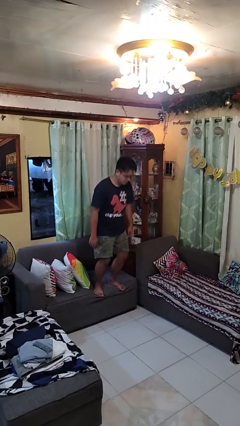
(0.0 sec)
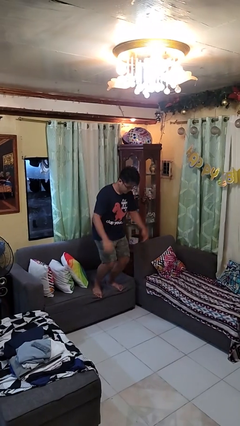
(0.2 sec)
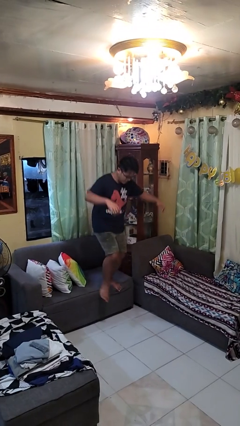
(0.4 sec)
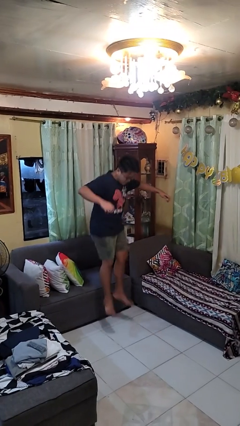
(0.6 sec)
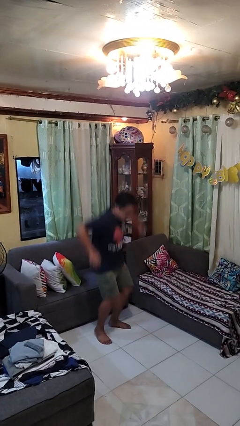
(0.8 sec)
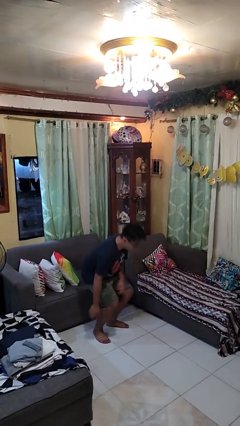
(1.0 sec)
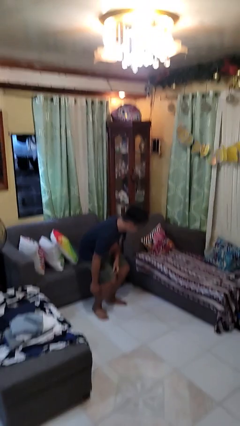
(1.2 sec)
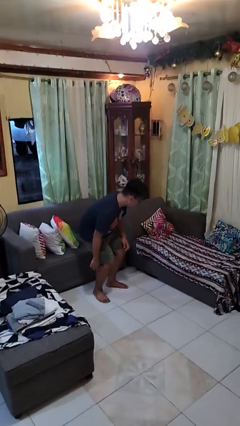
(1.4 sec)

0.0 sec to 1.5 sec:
person jumps on couch

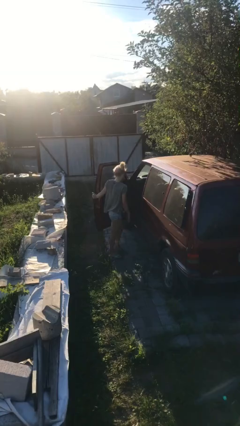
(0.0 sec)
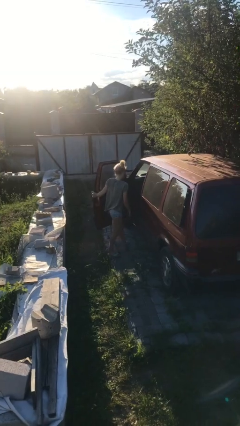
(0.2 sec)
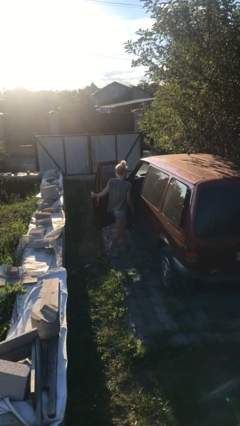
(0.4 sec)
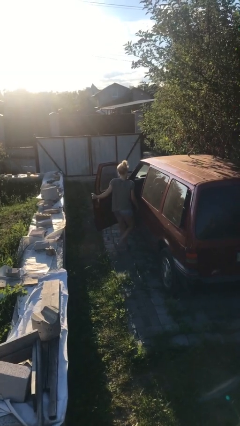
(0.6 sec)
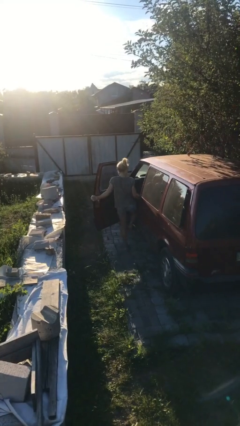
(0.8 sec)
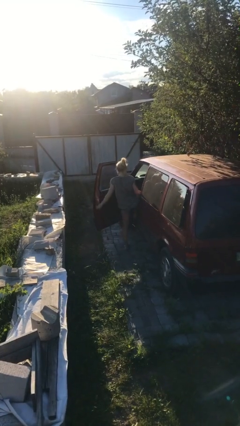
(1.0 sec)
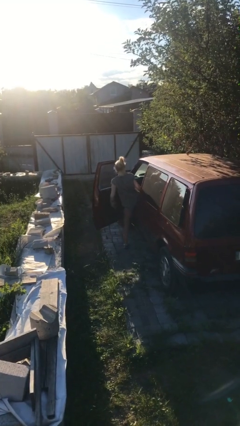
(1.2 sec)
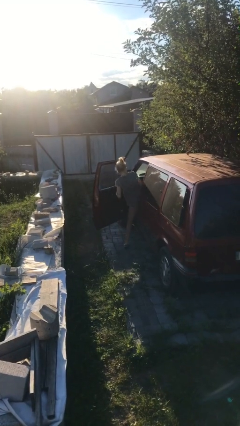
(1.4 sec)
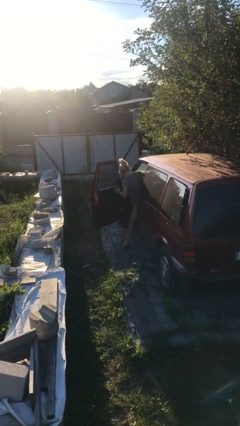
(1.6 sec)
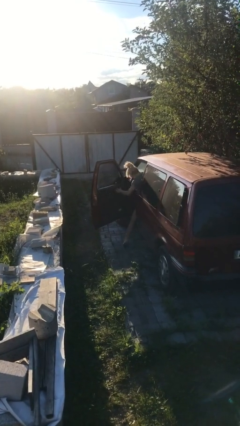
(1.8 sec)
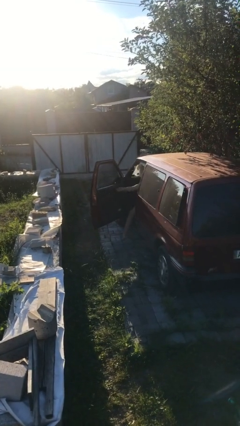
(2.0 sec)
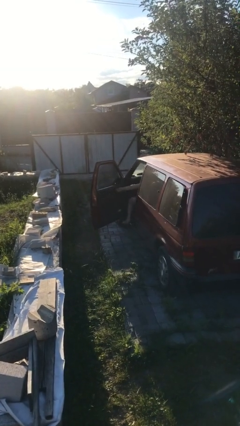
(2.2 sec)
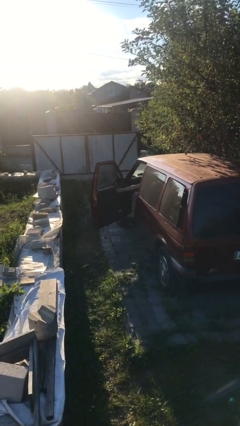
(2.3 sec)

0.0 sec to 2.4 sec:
person enters car

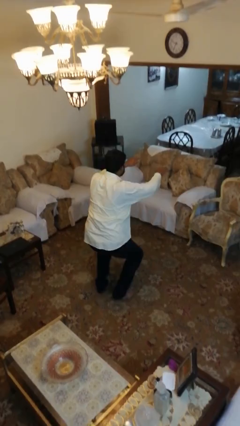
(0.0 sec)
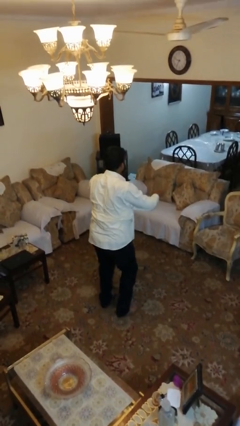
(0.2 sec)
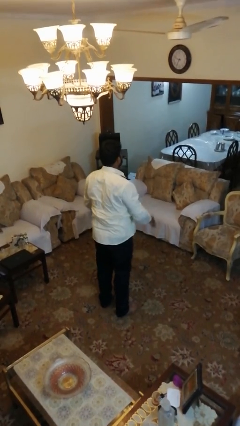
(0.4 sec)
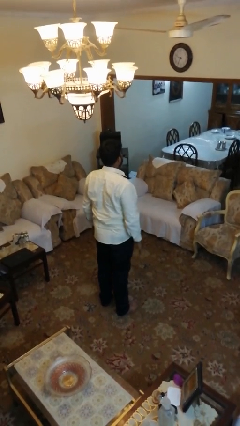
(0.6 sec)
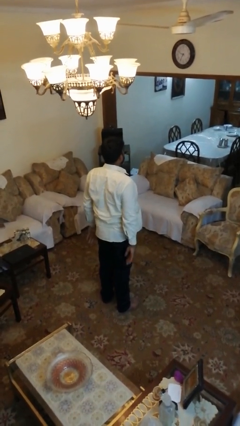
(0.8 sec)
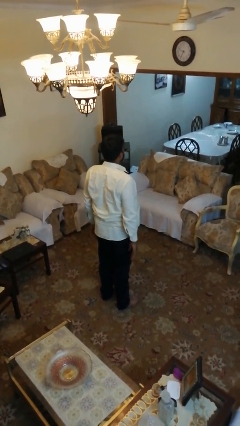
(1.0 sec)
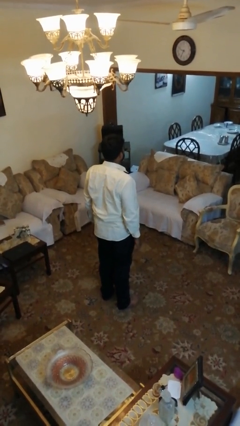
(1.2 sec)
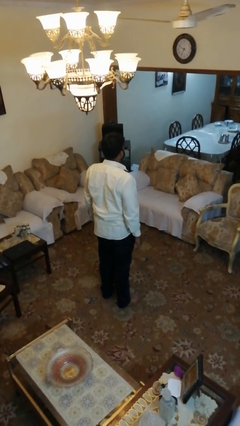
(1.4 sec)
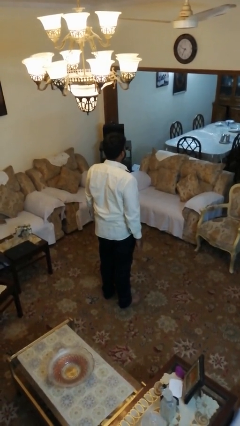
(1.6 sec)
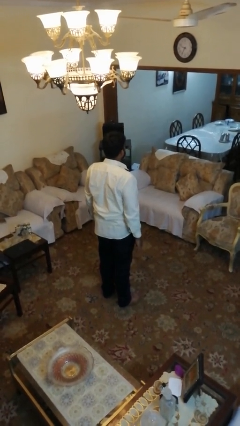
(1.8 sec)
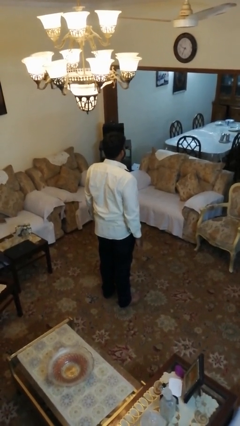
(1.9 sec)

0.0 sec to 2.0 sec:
person stands up

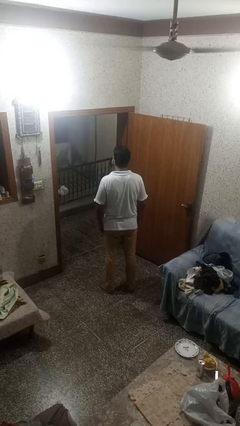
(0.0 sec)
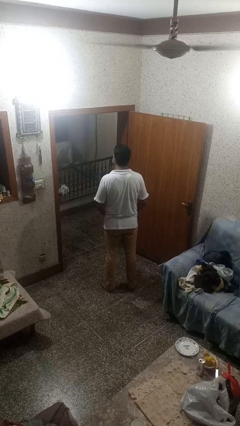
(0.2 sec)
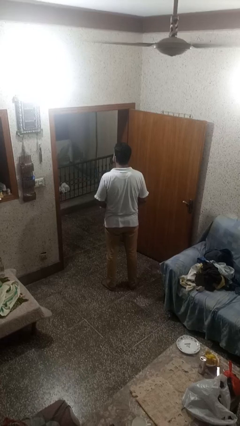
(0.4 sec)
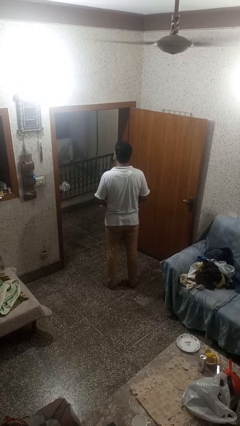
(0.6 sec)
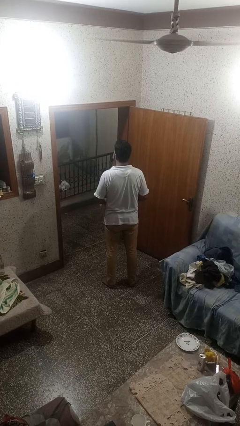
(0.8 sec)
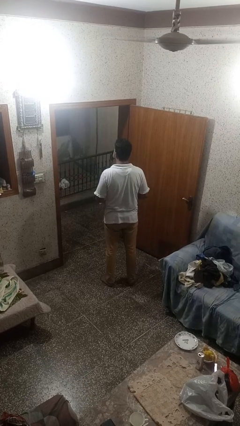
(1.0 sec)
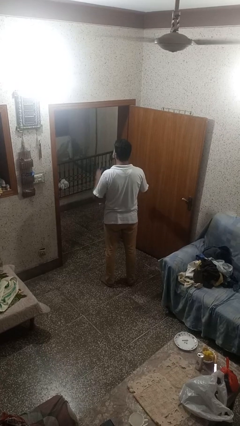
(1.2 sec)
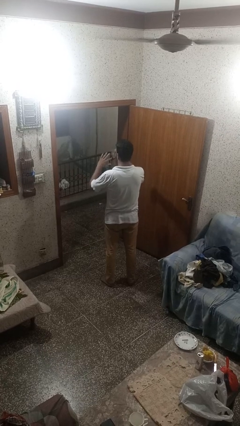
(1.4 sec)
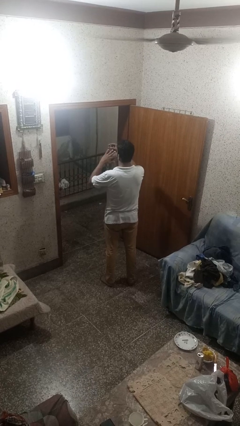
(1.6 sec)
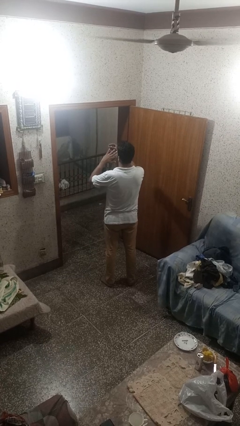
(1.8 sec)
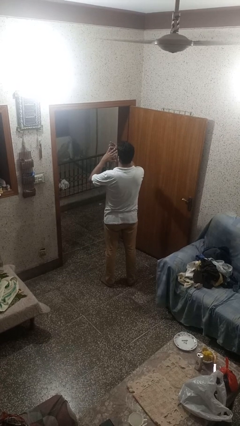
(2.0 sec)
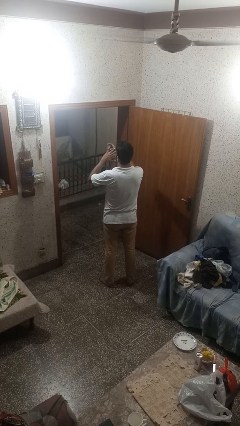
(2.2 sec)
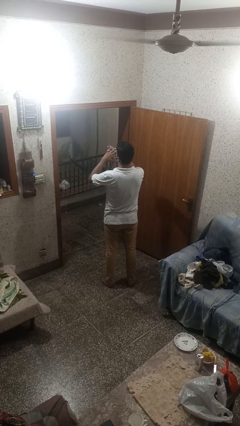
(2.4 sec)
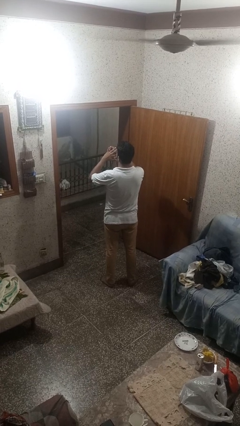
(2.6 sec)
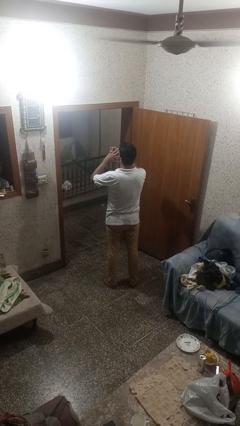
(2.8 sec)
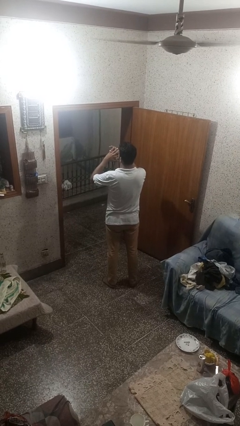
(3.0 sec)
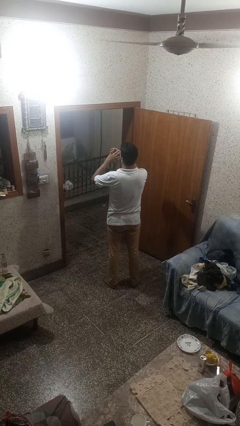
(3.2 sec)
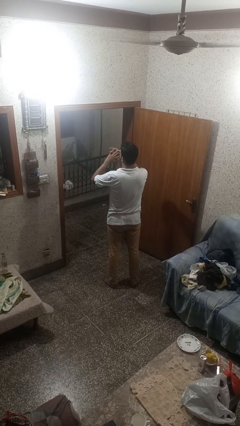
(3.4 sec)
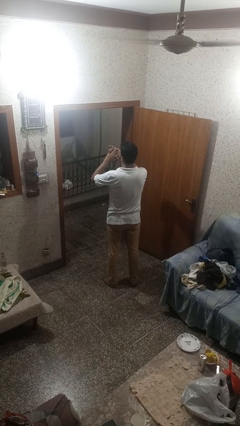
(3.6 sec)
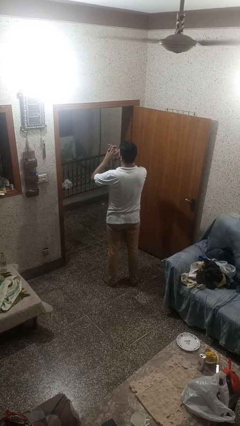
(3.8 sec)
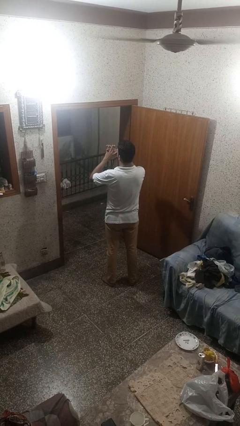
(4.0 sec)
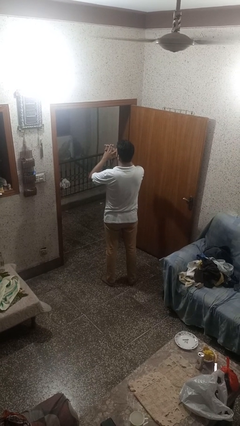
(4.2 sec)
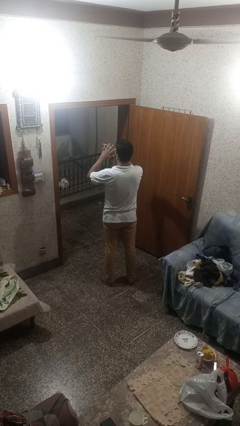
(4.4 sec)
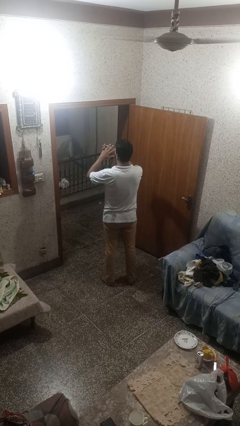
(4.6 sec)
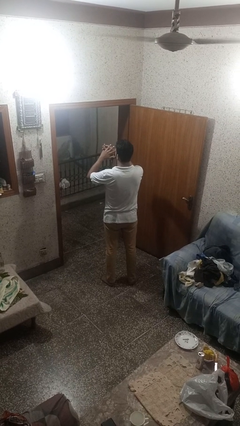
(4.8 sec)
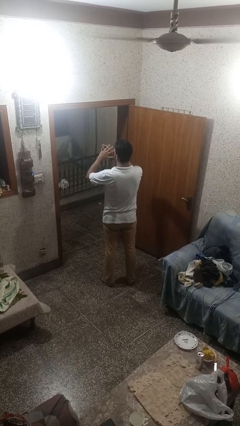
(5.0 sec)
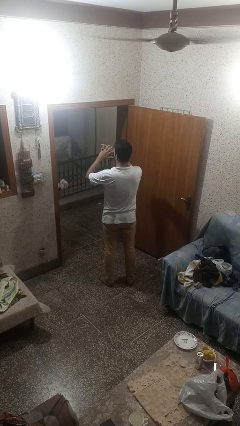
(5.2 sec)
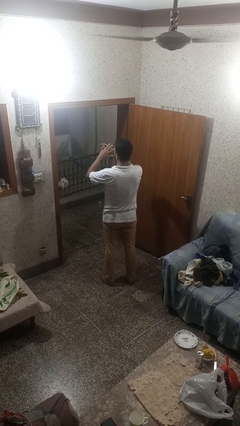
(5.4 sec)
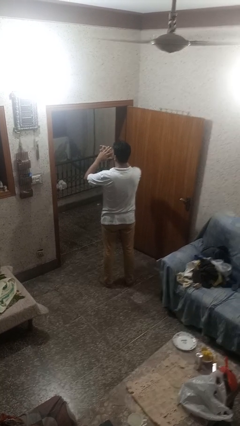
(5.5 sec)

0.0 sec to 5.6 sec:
person puts on ring

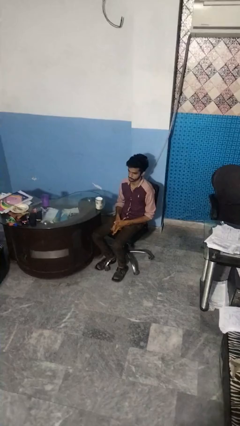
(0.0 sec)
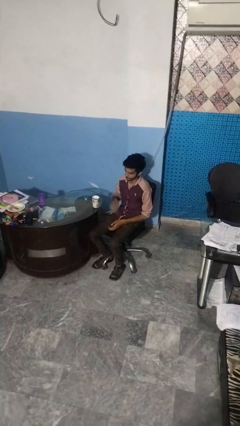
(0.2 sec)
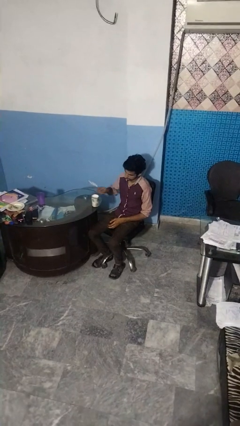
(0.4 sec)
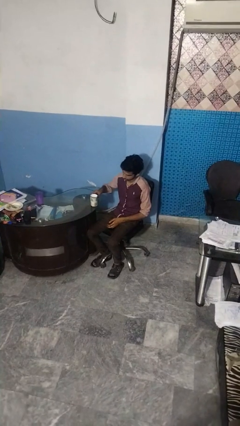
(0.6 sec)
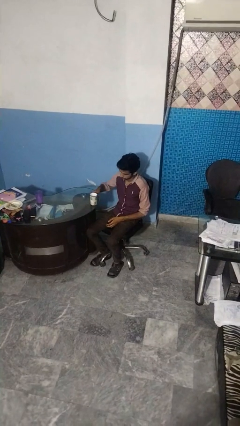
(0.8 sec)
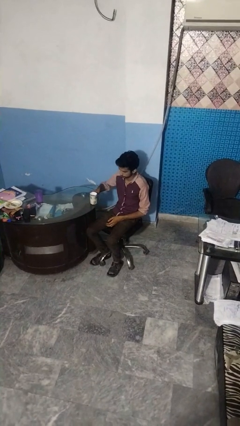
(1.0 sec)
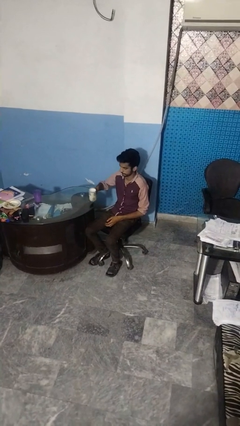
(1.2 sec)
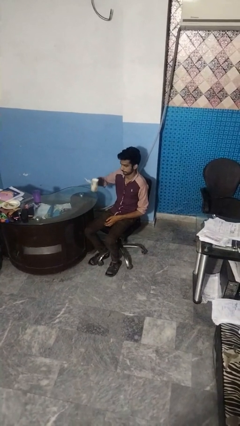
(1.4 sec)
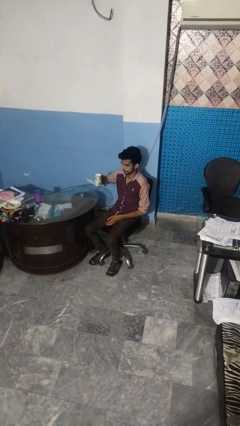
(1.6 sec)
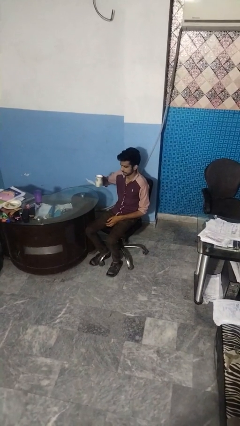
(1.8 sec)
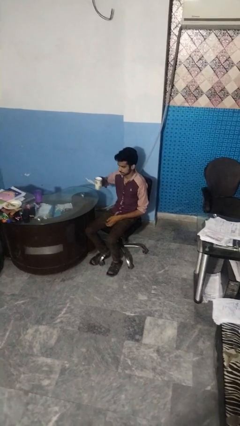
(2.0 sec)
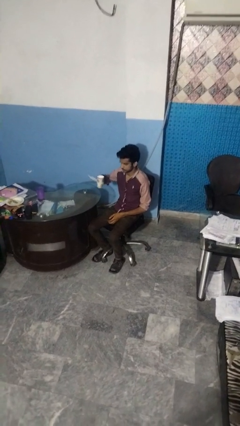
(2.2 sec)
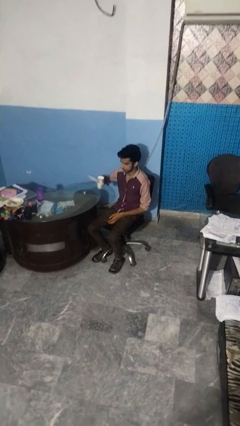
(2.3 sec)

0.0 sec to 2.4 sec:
person picks up object from table

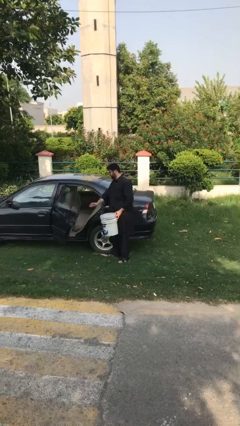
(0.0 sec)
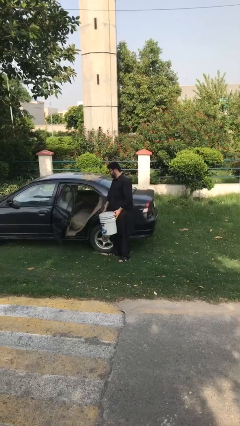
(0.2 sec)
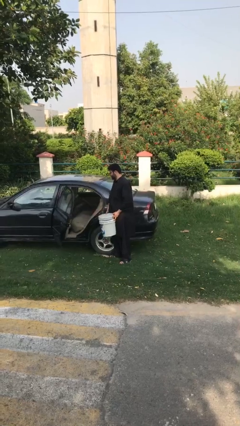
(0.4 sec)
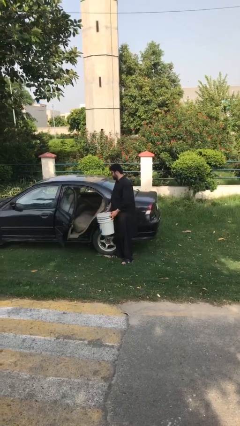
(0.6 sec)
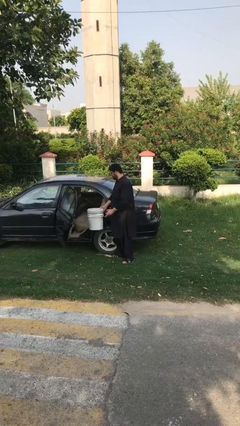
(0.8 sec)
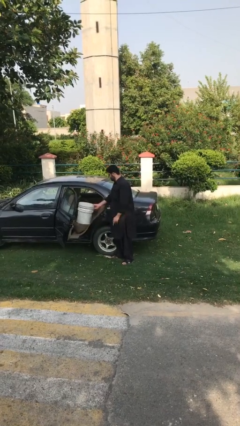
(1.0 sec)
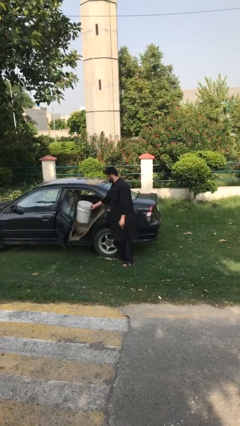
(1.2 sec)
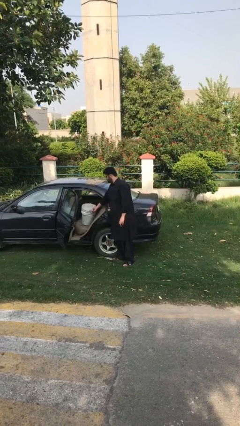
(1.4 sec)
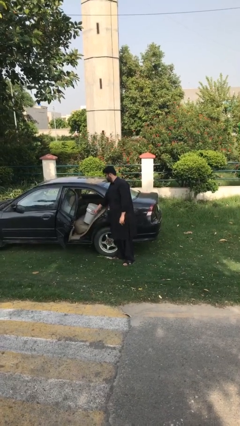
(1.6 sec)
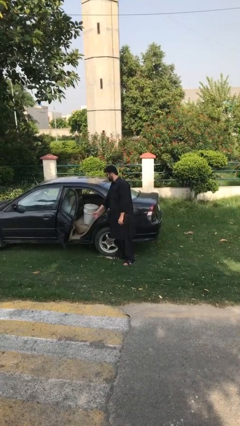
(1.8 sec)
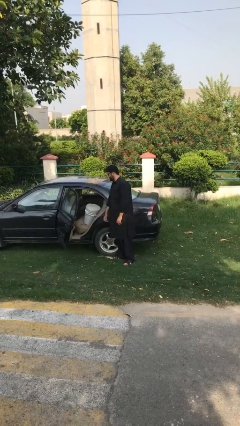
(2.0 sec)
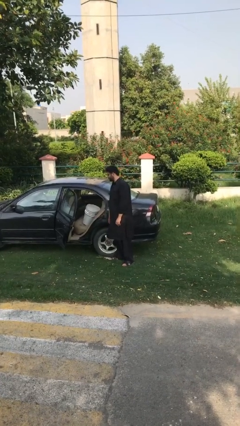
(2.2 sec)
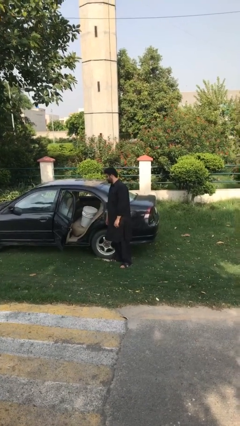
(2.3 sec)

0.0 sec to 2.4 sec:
person loads car

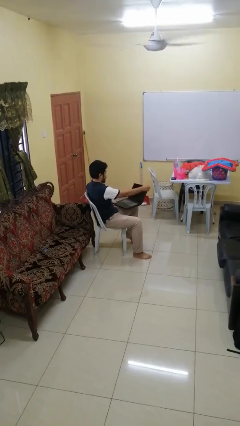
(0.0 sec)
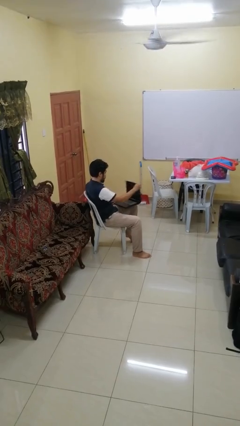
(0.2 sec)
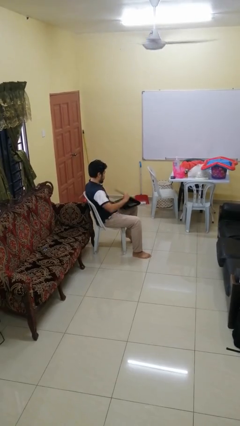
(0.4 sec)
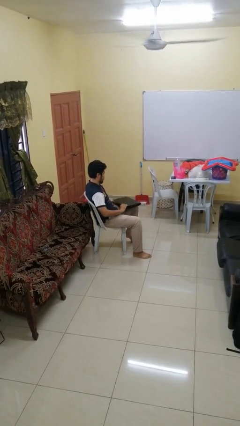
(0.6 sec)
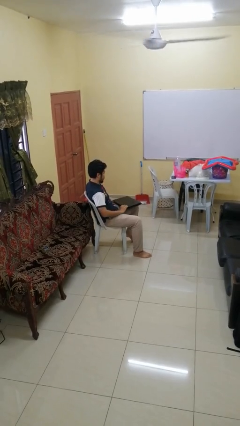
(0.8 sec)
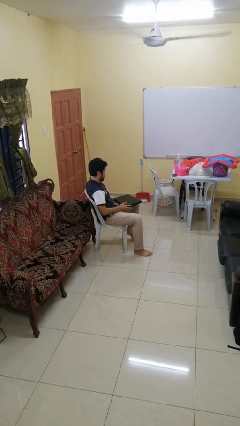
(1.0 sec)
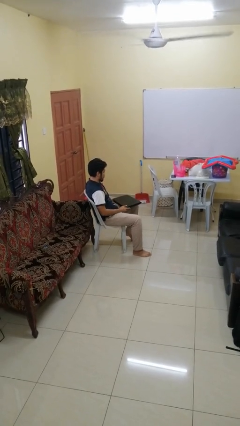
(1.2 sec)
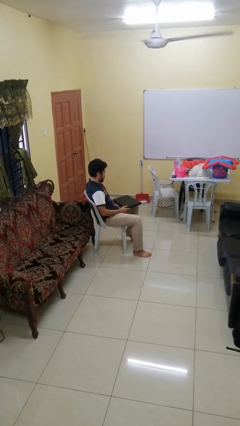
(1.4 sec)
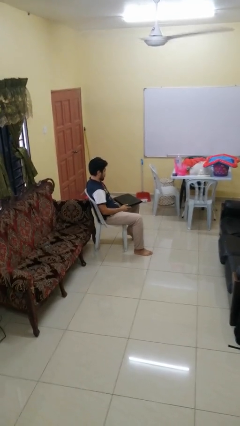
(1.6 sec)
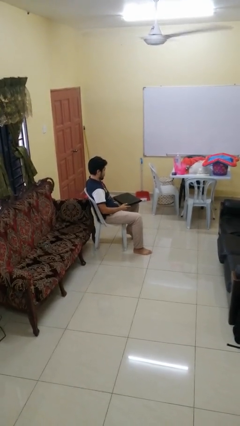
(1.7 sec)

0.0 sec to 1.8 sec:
person closes laptop
